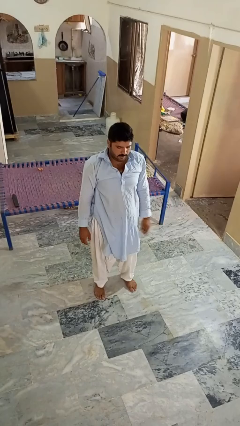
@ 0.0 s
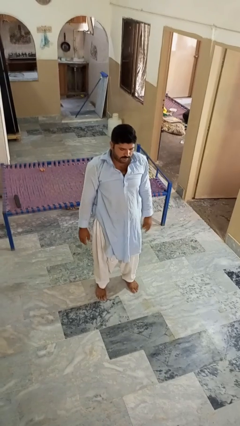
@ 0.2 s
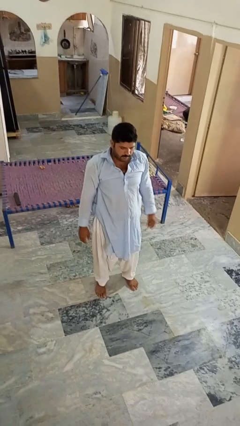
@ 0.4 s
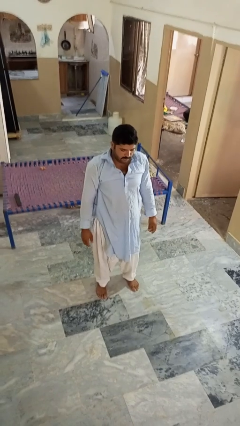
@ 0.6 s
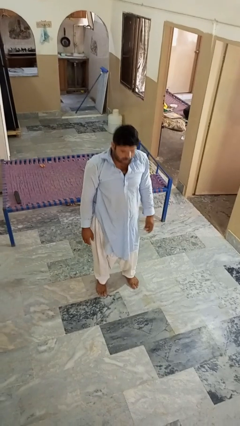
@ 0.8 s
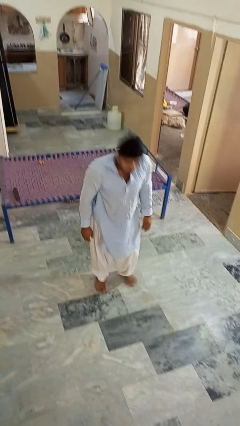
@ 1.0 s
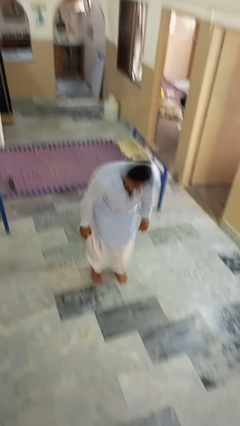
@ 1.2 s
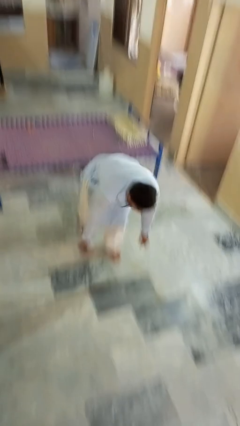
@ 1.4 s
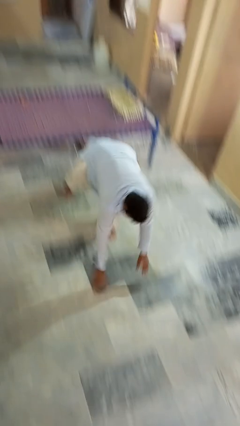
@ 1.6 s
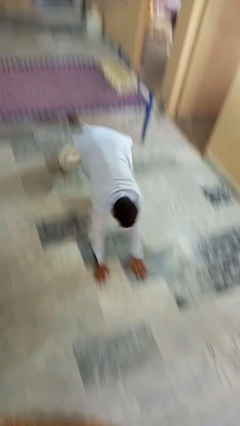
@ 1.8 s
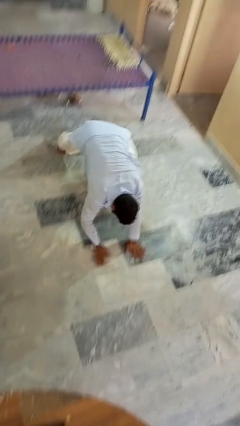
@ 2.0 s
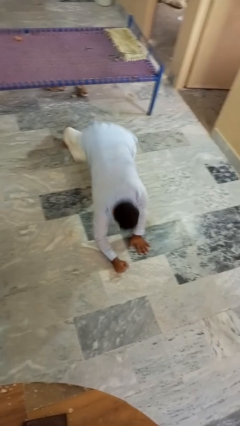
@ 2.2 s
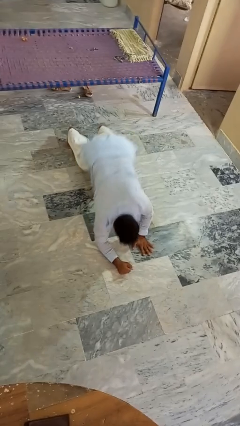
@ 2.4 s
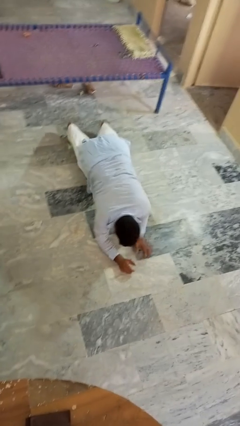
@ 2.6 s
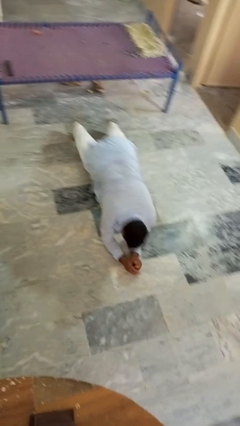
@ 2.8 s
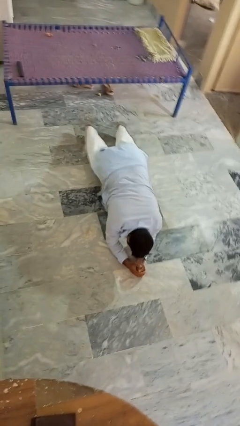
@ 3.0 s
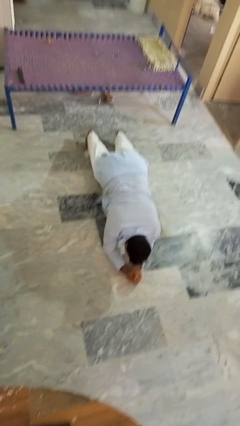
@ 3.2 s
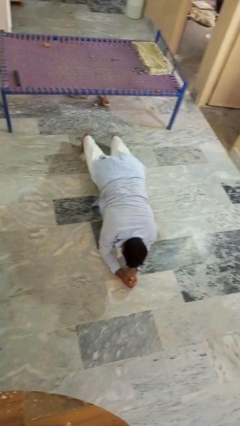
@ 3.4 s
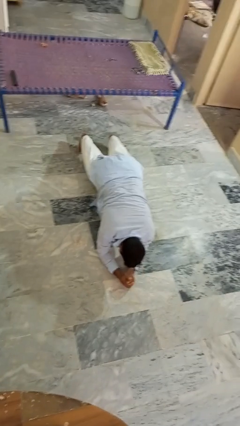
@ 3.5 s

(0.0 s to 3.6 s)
person exercises with plank

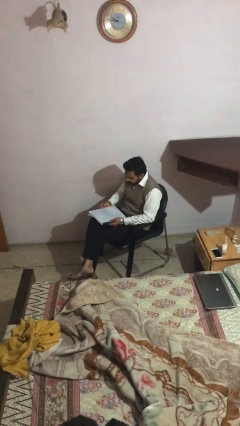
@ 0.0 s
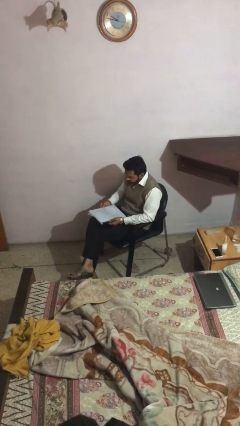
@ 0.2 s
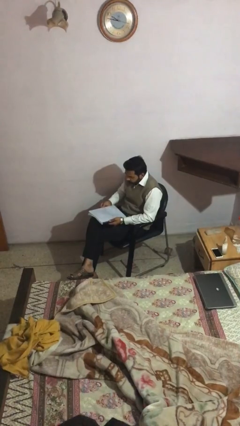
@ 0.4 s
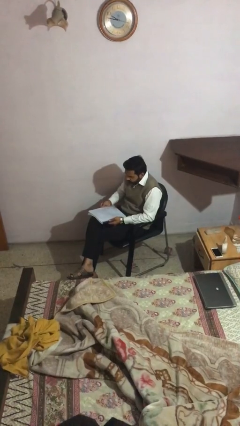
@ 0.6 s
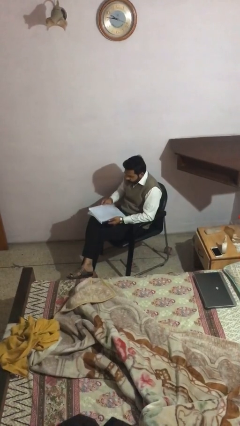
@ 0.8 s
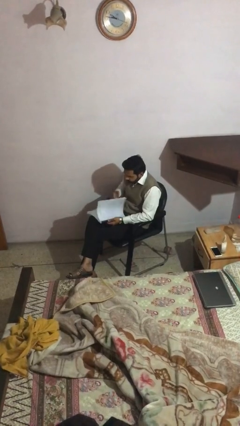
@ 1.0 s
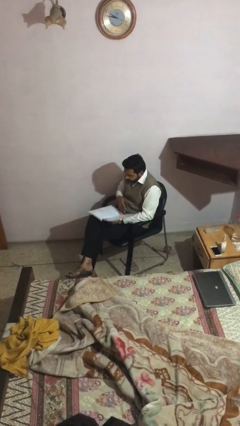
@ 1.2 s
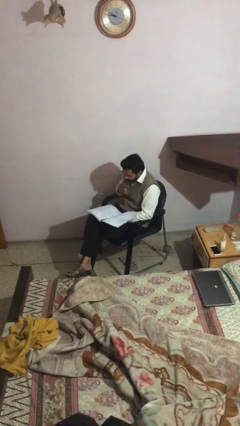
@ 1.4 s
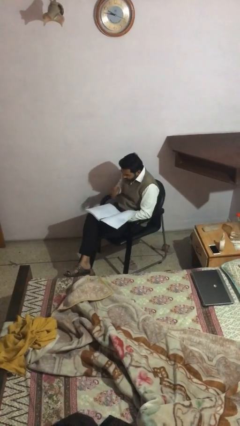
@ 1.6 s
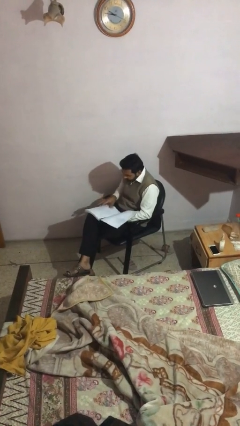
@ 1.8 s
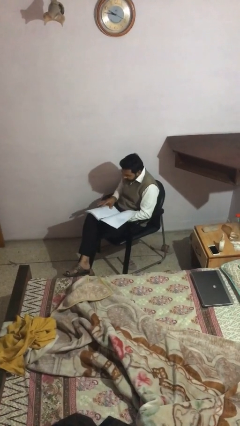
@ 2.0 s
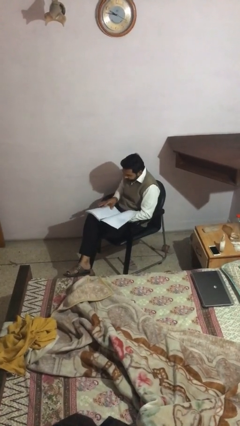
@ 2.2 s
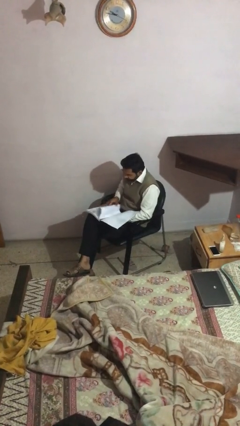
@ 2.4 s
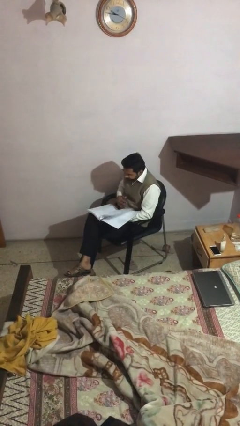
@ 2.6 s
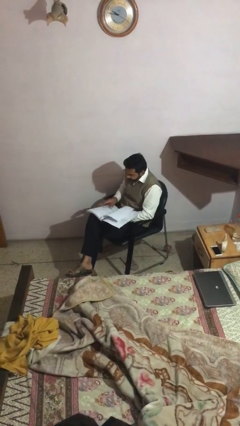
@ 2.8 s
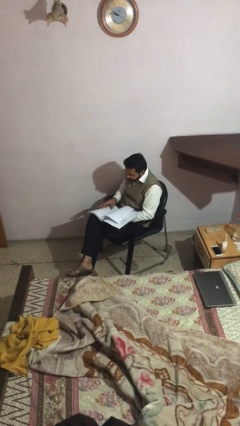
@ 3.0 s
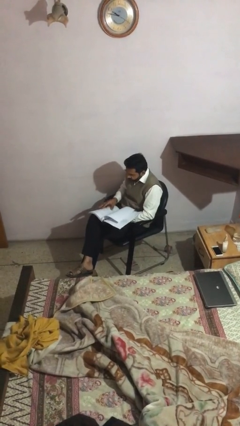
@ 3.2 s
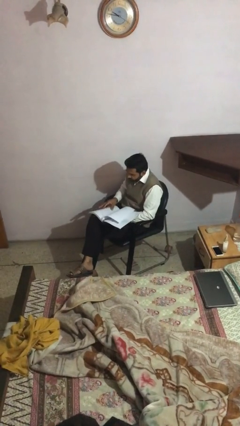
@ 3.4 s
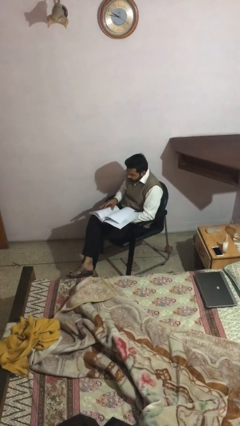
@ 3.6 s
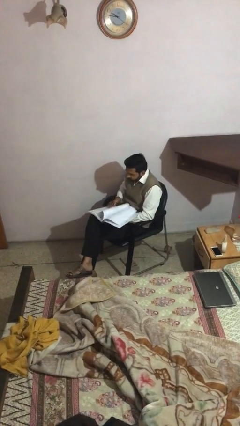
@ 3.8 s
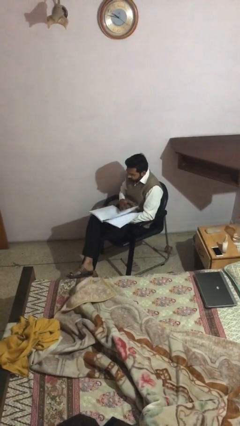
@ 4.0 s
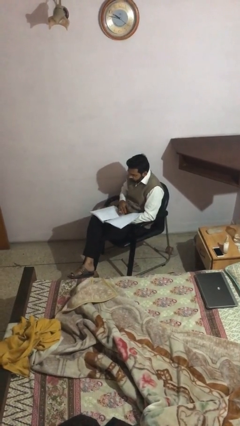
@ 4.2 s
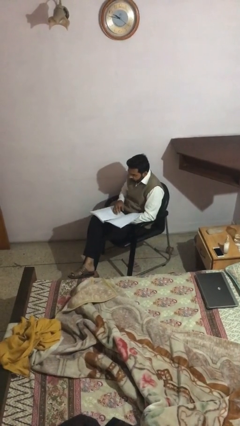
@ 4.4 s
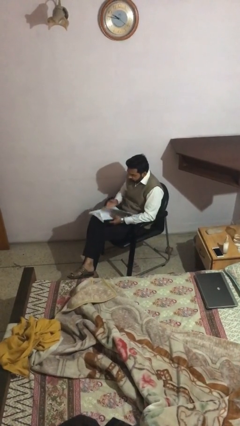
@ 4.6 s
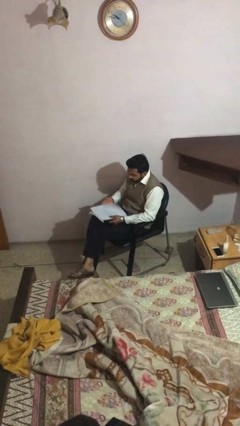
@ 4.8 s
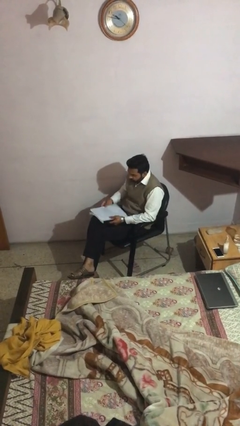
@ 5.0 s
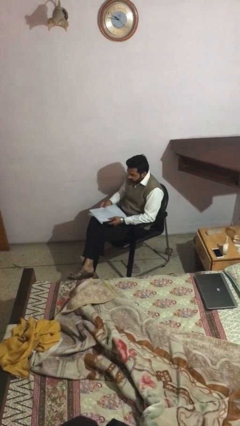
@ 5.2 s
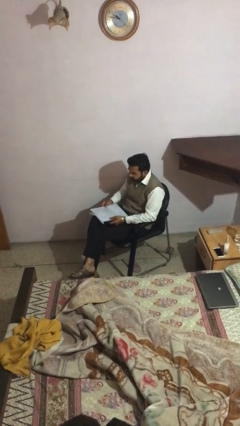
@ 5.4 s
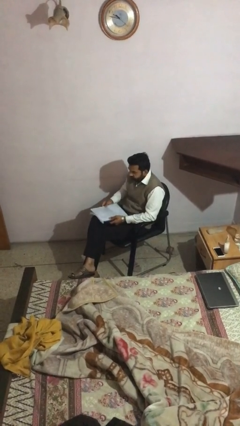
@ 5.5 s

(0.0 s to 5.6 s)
person reads document

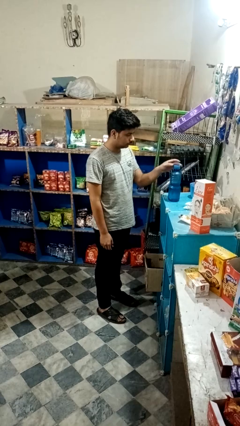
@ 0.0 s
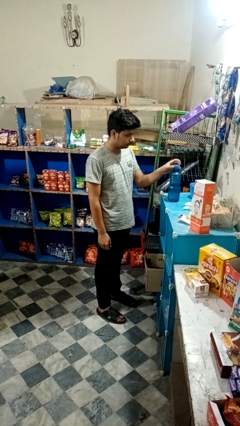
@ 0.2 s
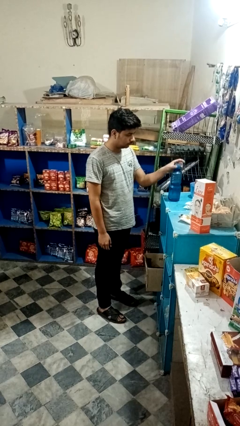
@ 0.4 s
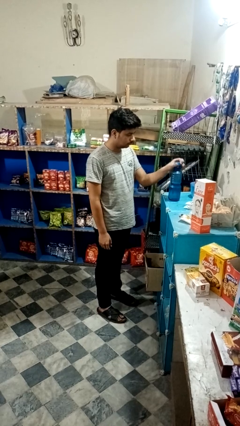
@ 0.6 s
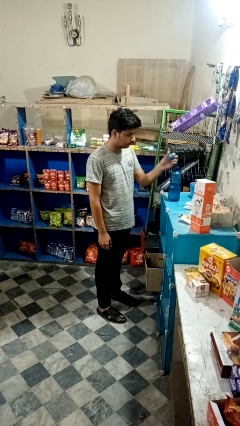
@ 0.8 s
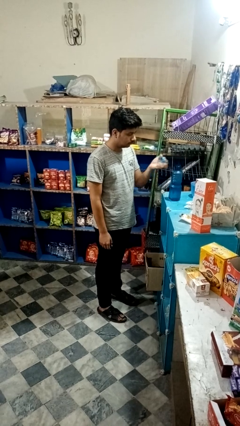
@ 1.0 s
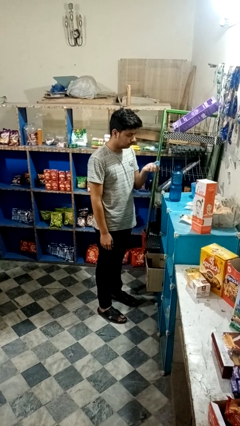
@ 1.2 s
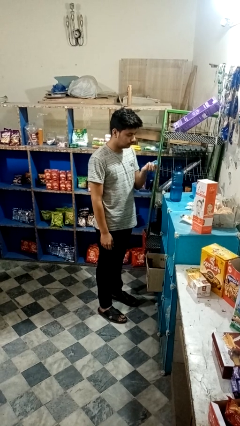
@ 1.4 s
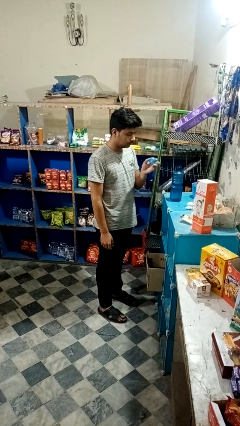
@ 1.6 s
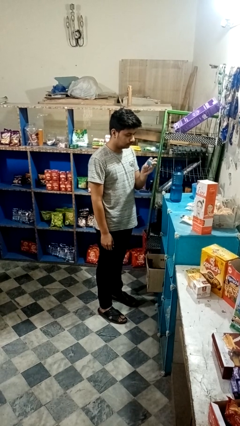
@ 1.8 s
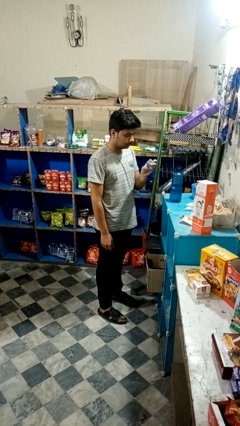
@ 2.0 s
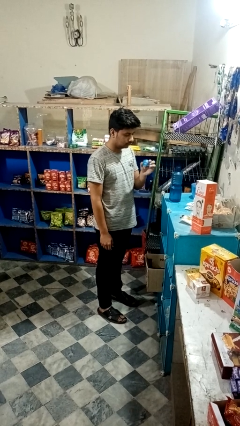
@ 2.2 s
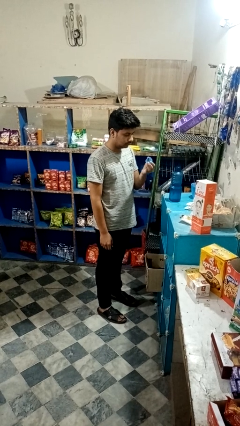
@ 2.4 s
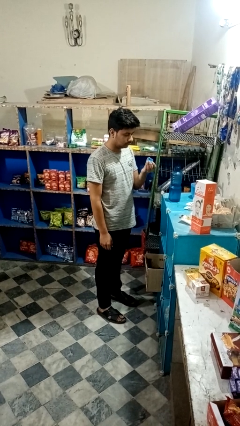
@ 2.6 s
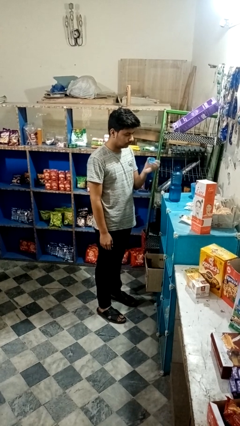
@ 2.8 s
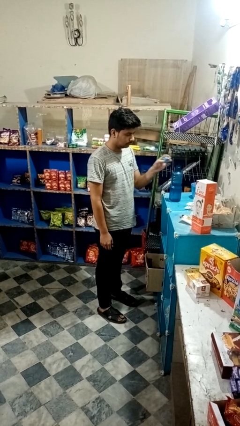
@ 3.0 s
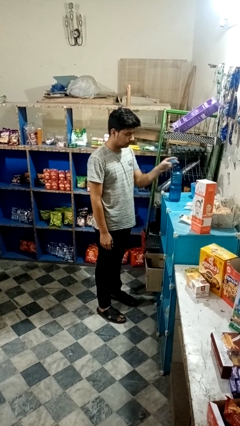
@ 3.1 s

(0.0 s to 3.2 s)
person unscrews lid from bottle

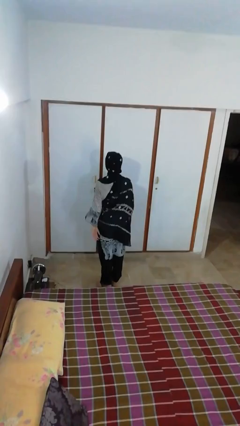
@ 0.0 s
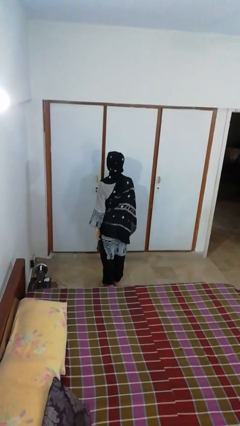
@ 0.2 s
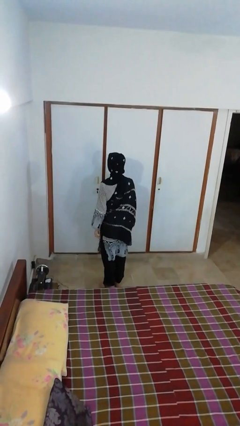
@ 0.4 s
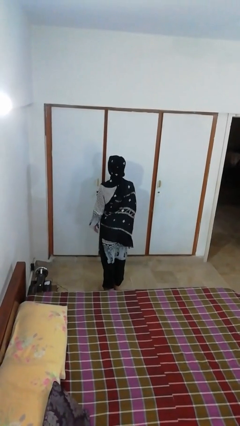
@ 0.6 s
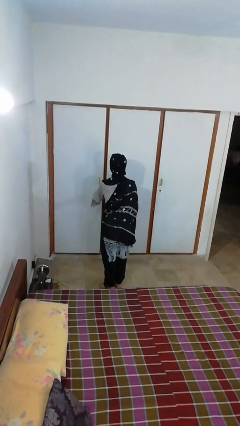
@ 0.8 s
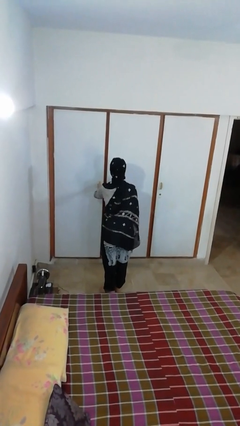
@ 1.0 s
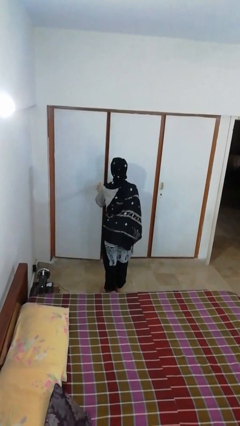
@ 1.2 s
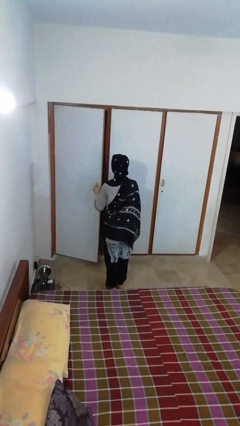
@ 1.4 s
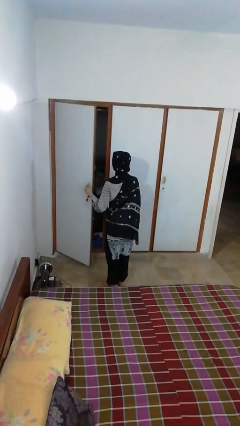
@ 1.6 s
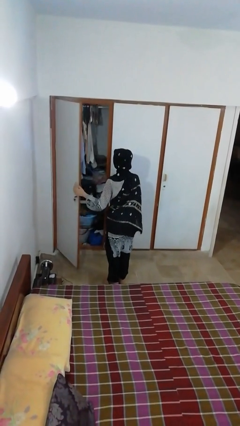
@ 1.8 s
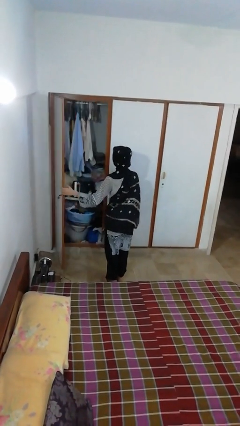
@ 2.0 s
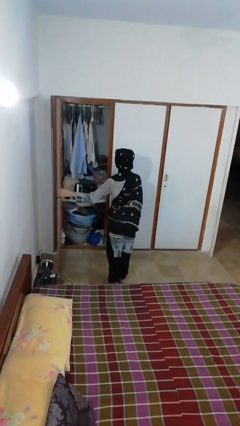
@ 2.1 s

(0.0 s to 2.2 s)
person opens closet door

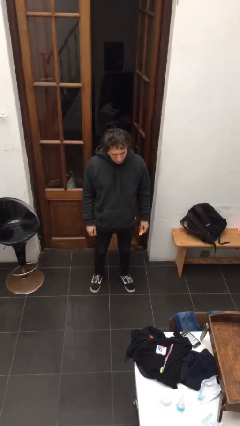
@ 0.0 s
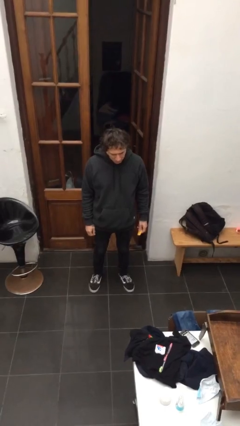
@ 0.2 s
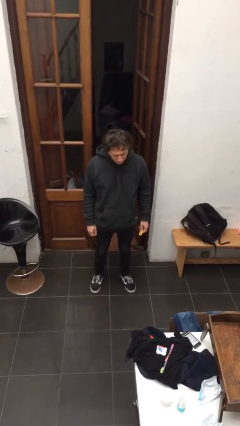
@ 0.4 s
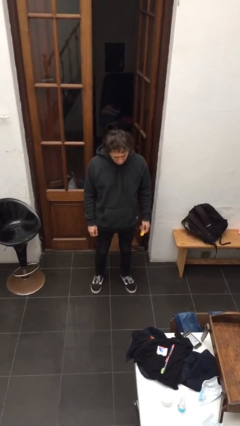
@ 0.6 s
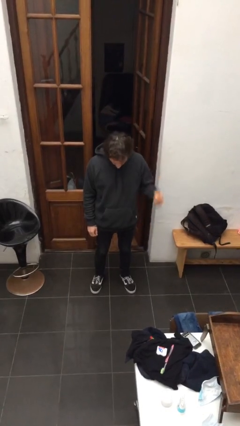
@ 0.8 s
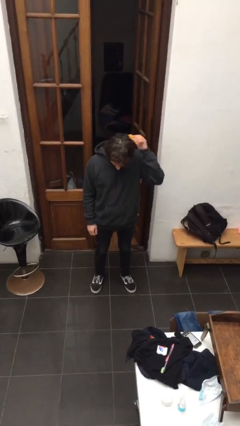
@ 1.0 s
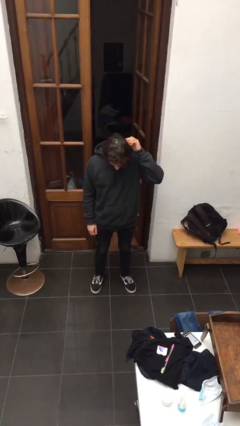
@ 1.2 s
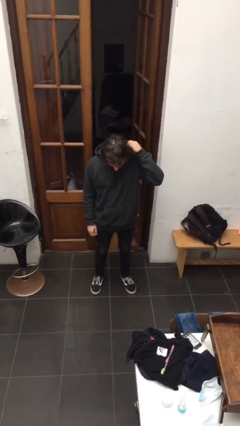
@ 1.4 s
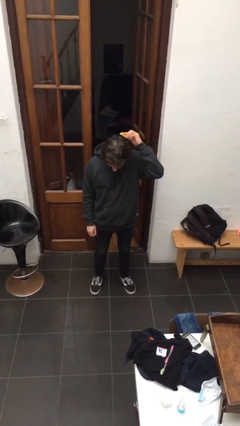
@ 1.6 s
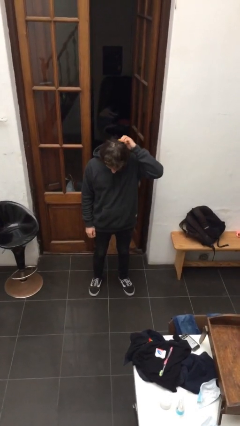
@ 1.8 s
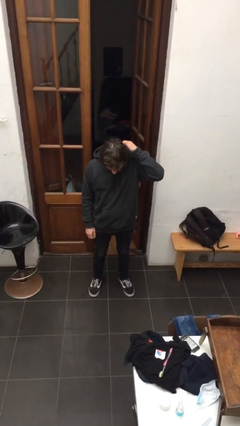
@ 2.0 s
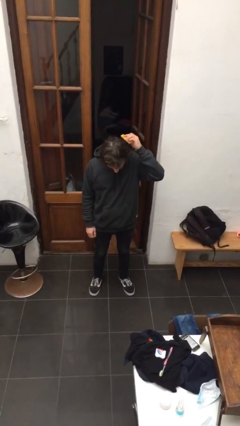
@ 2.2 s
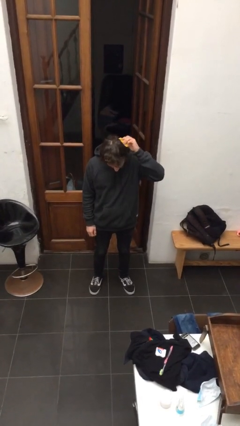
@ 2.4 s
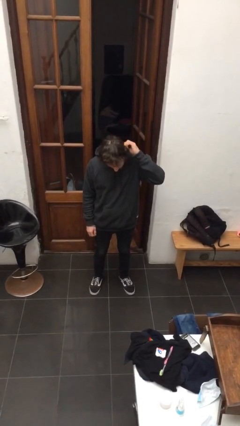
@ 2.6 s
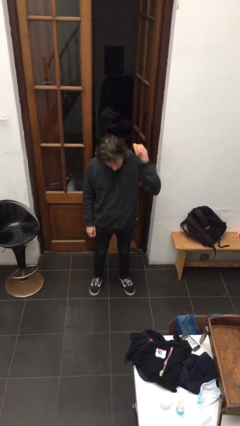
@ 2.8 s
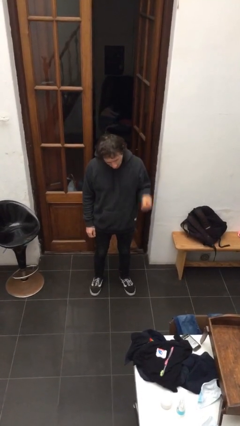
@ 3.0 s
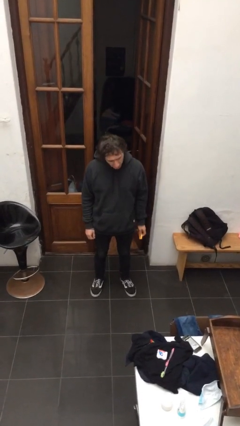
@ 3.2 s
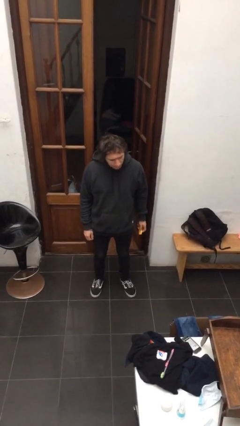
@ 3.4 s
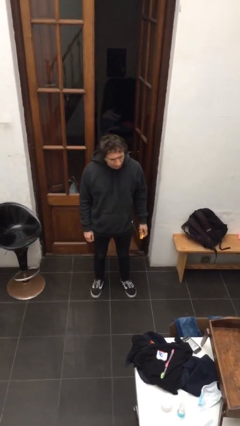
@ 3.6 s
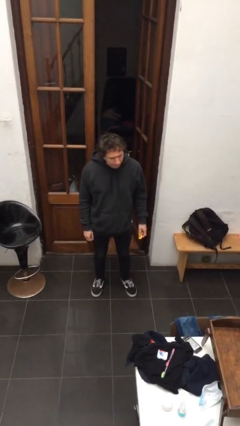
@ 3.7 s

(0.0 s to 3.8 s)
person brushes hair
